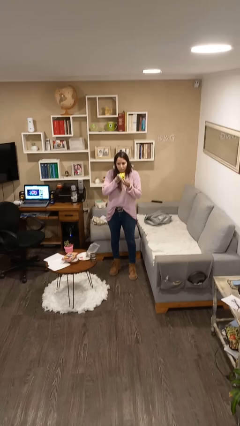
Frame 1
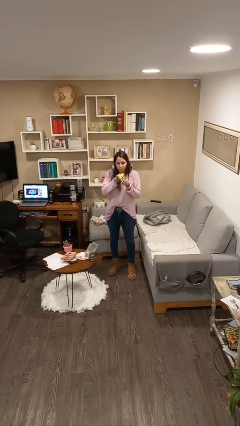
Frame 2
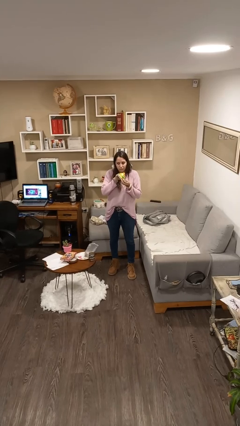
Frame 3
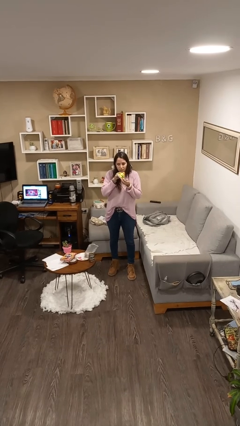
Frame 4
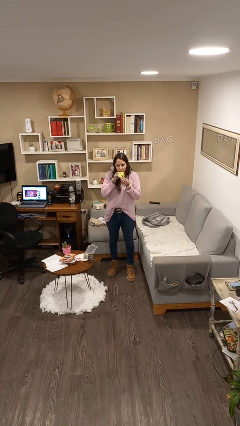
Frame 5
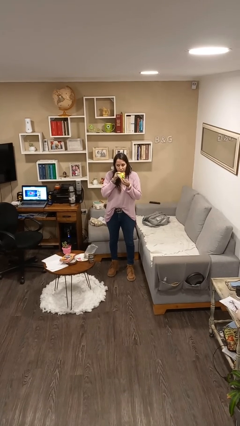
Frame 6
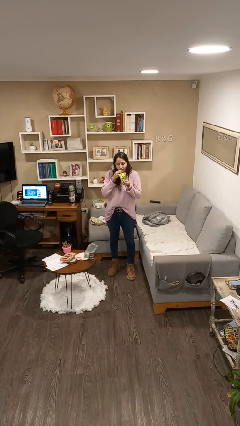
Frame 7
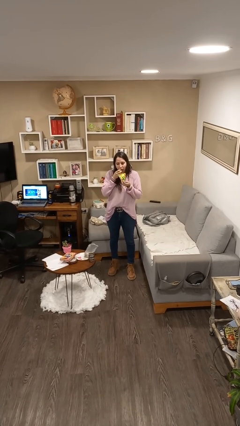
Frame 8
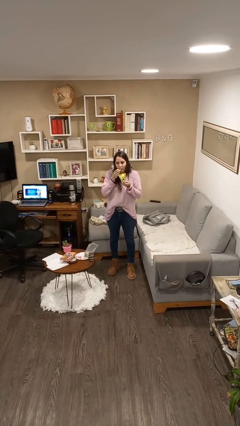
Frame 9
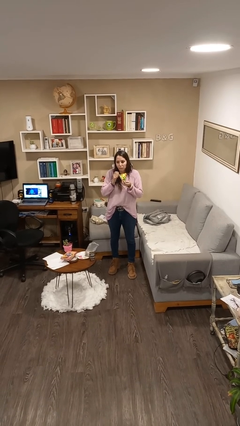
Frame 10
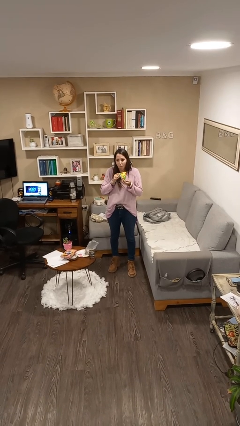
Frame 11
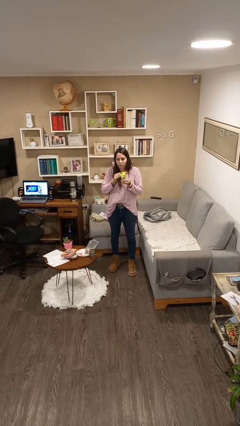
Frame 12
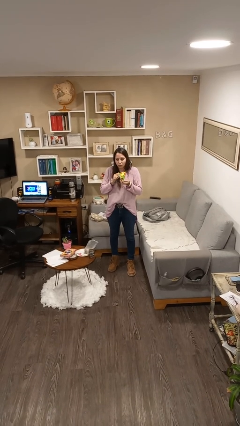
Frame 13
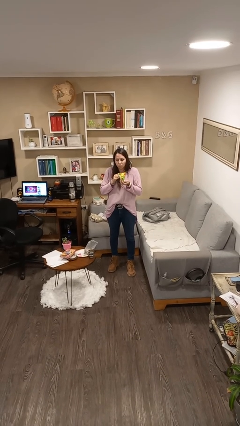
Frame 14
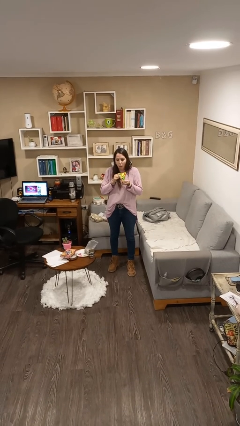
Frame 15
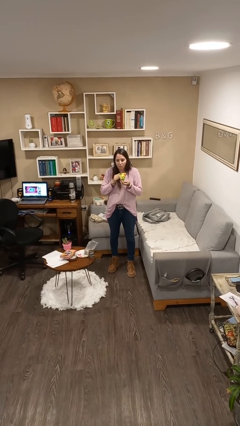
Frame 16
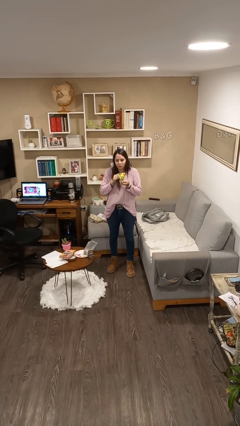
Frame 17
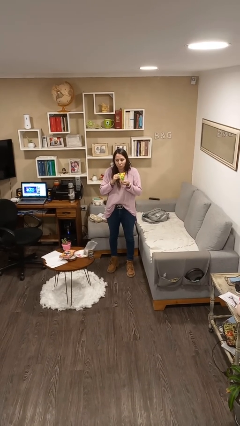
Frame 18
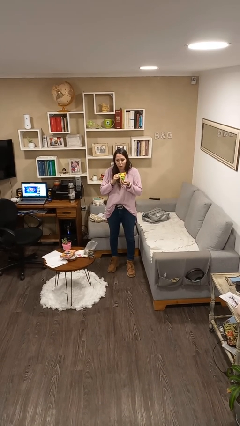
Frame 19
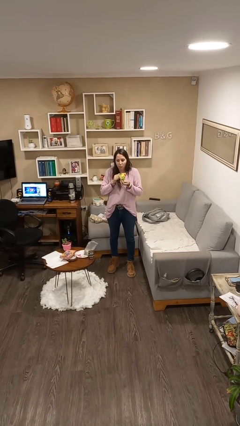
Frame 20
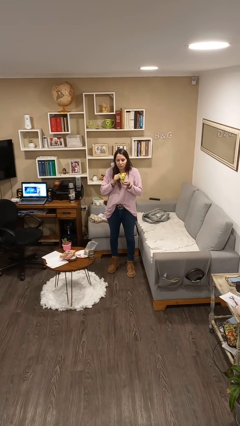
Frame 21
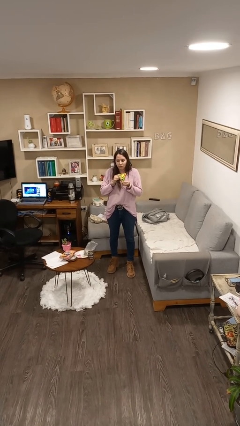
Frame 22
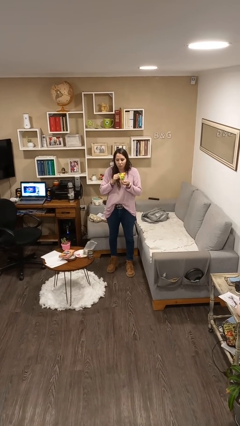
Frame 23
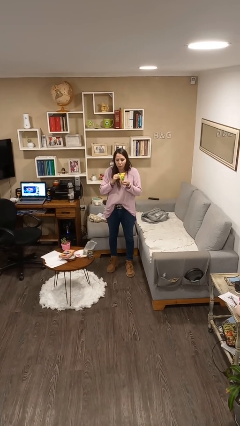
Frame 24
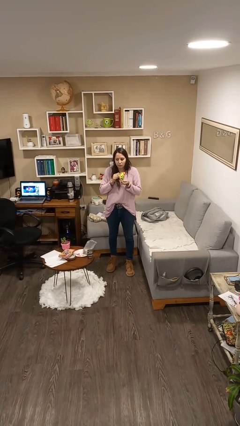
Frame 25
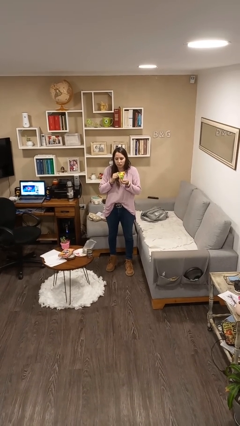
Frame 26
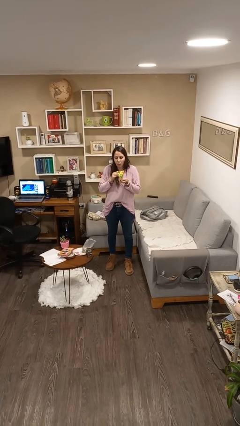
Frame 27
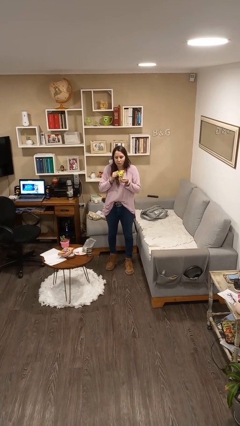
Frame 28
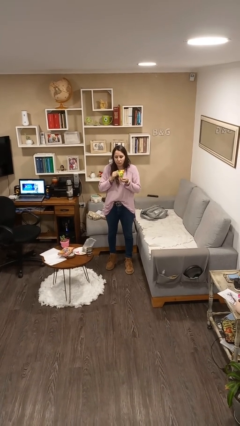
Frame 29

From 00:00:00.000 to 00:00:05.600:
person eats snack from bag

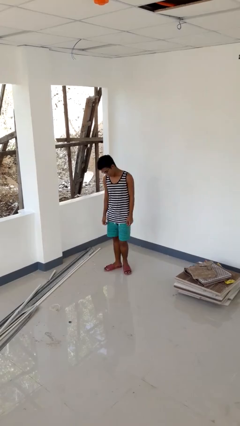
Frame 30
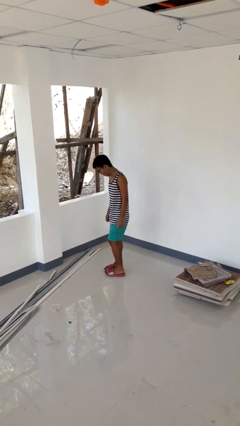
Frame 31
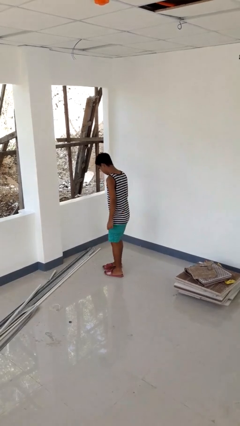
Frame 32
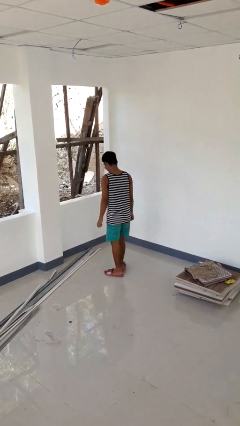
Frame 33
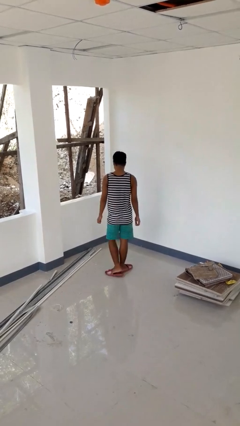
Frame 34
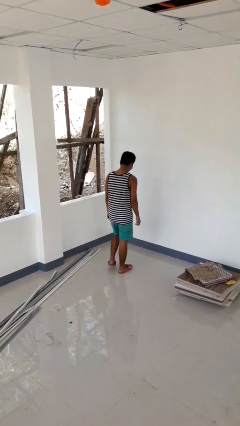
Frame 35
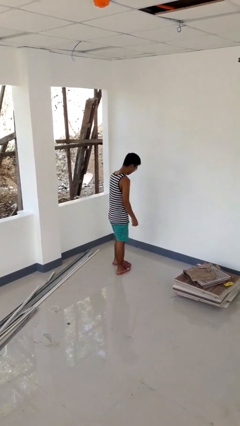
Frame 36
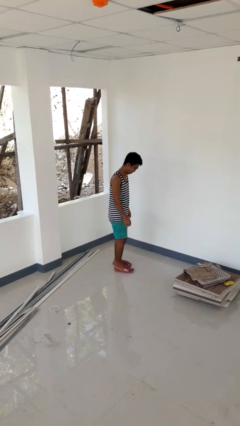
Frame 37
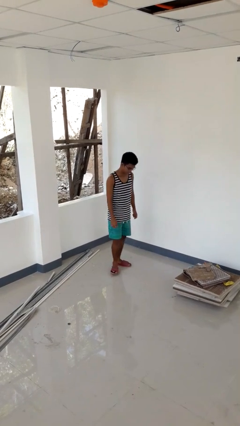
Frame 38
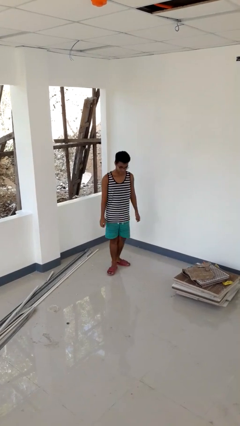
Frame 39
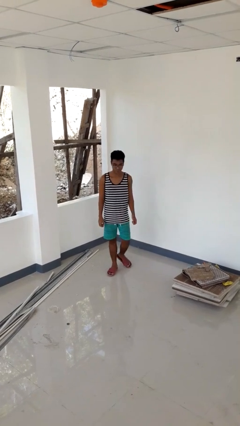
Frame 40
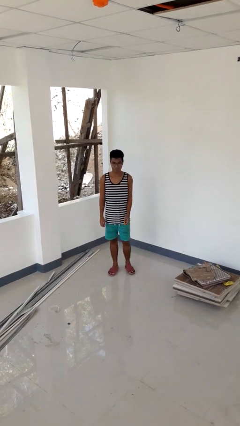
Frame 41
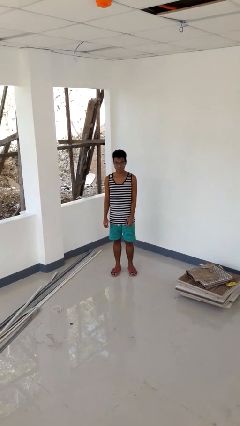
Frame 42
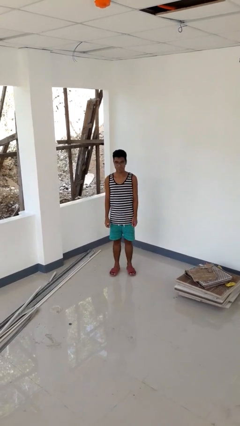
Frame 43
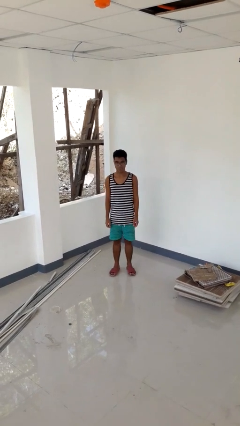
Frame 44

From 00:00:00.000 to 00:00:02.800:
person twirls

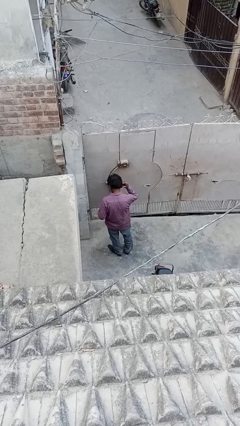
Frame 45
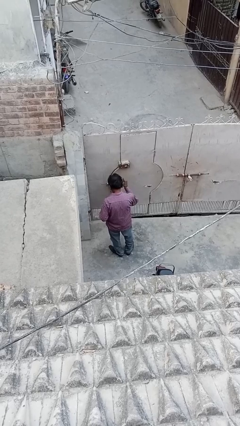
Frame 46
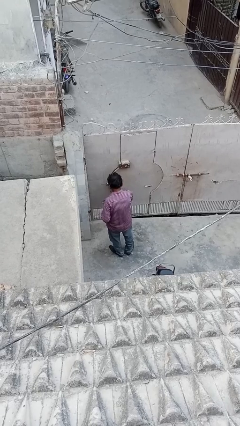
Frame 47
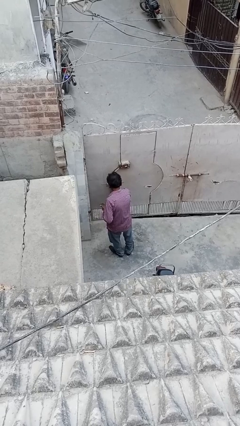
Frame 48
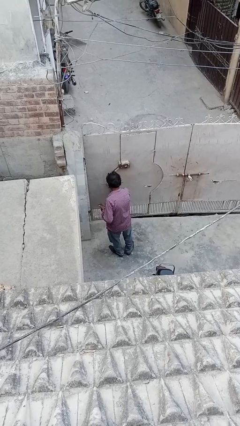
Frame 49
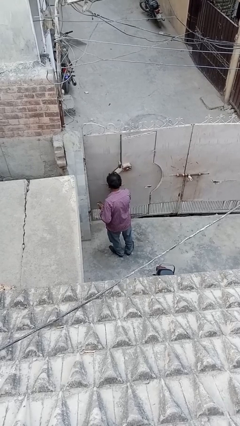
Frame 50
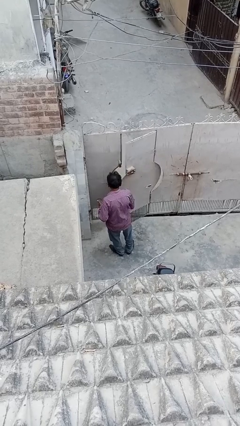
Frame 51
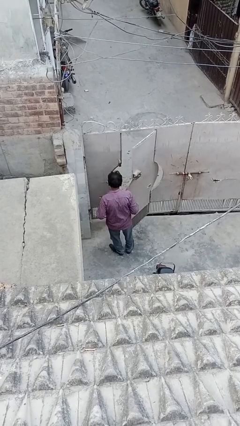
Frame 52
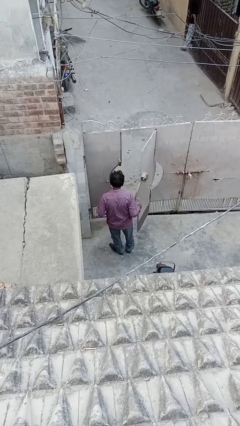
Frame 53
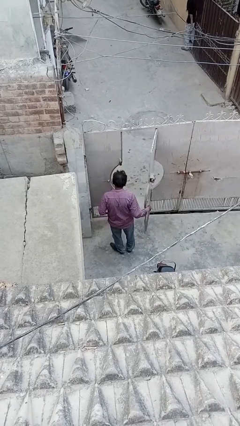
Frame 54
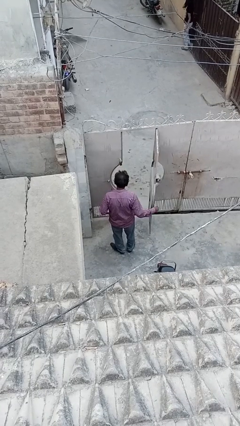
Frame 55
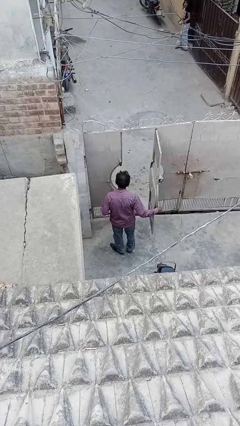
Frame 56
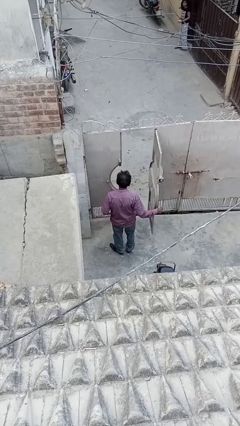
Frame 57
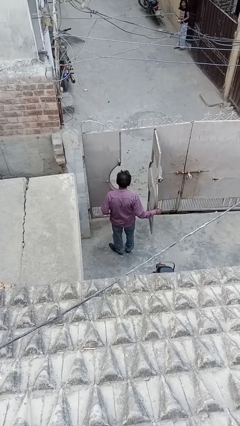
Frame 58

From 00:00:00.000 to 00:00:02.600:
person opens facility door

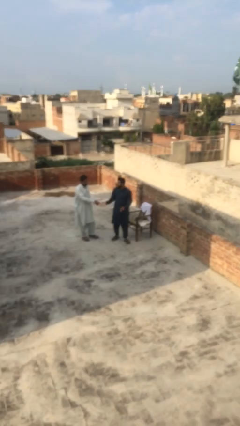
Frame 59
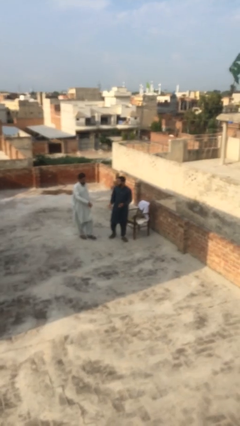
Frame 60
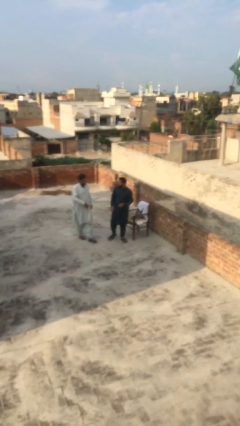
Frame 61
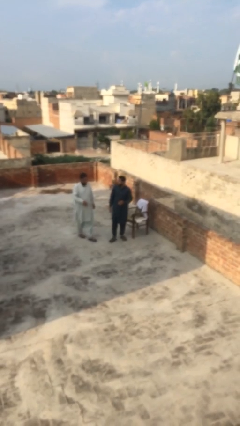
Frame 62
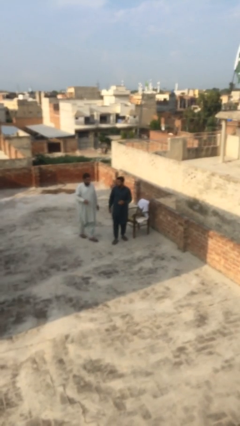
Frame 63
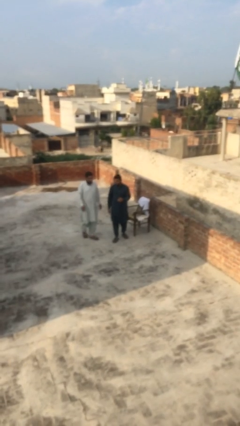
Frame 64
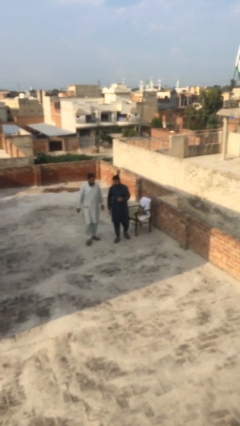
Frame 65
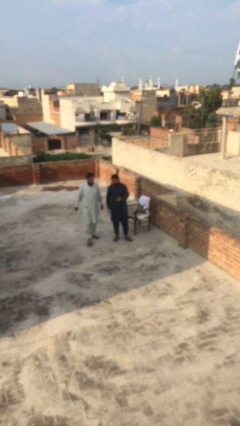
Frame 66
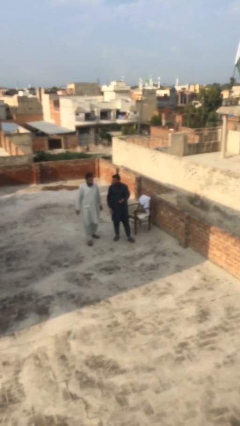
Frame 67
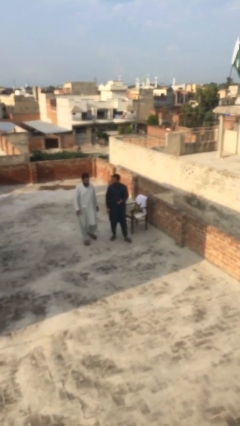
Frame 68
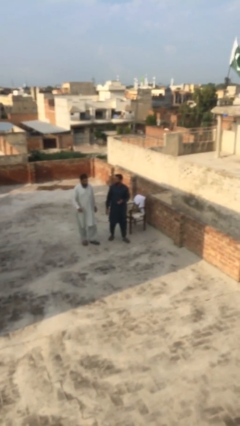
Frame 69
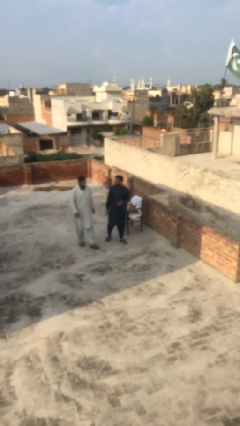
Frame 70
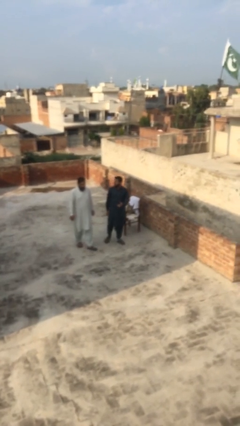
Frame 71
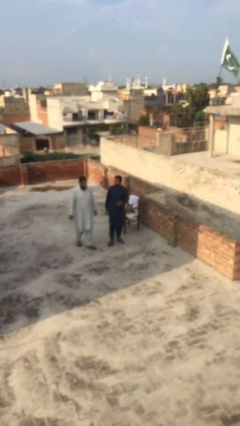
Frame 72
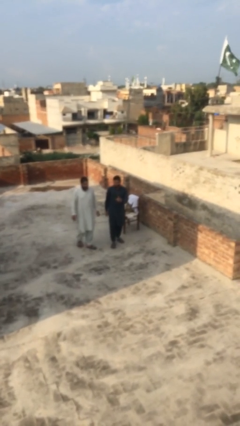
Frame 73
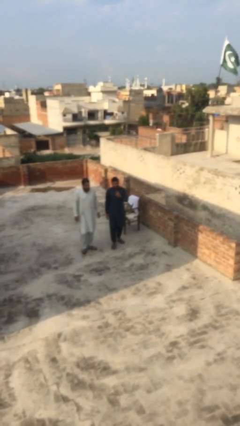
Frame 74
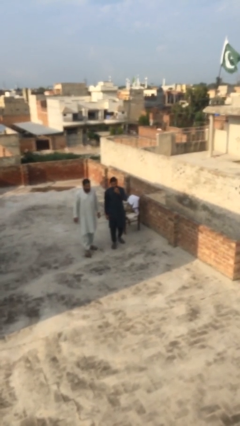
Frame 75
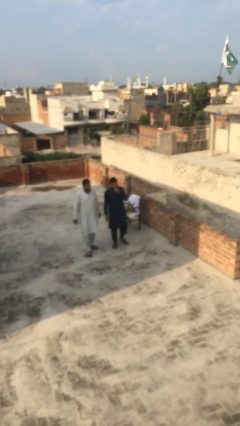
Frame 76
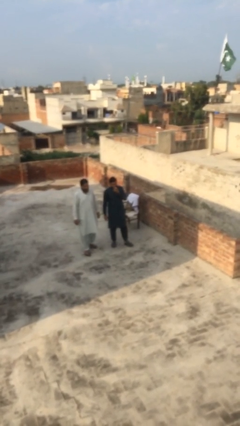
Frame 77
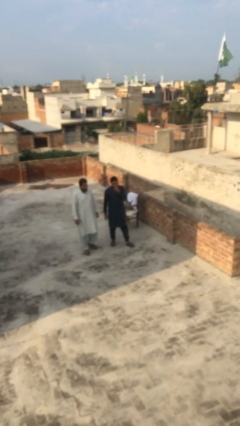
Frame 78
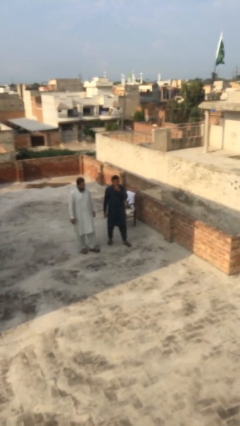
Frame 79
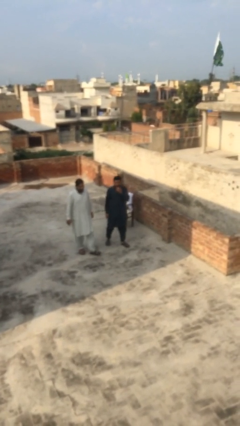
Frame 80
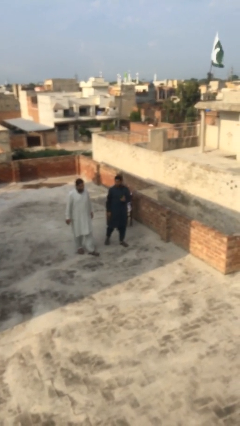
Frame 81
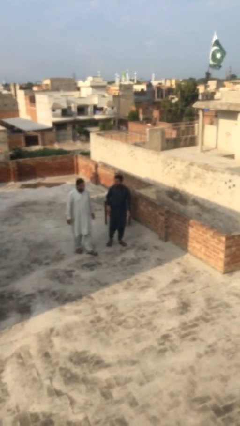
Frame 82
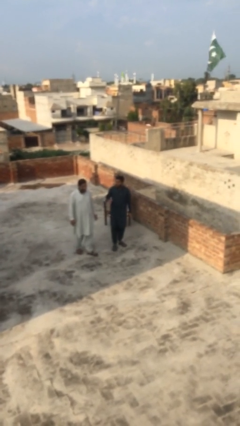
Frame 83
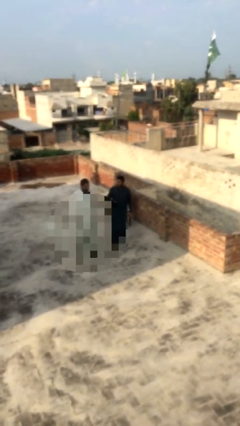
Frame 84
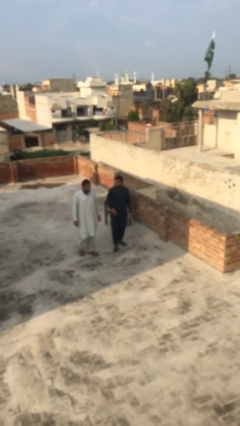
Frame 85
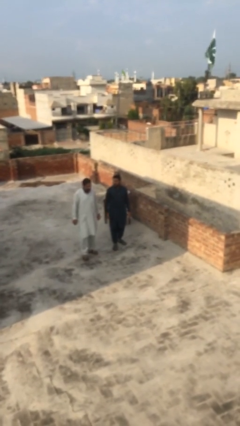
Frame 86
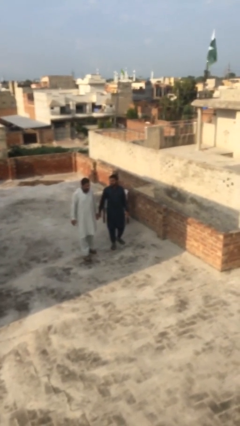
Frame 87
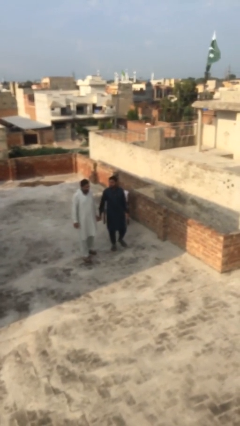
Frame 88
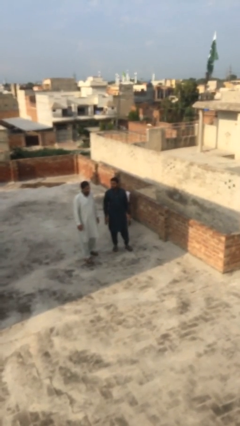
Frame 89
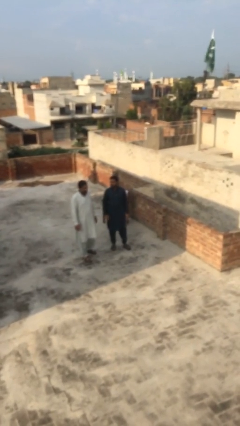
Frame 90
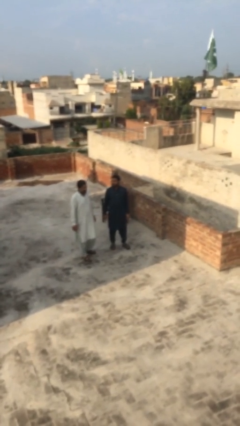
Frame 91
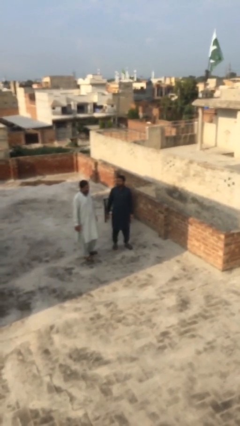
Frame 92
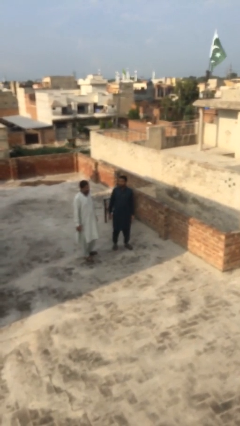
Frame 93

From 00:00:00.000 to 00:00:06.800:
person talks to person
